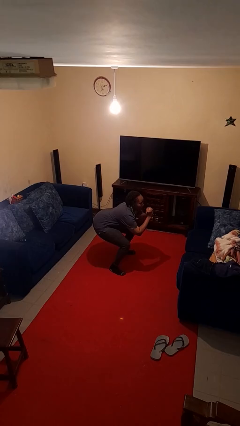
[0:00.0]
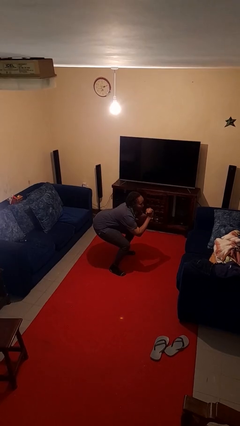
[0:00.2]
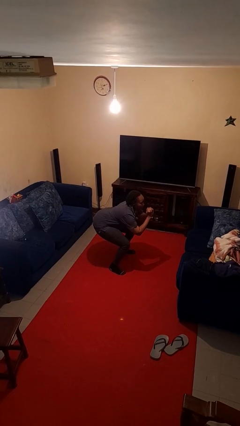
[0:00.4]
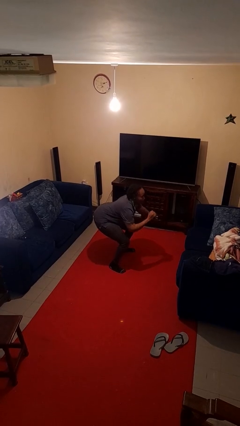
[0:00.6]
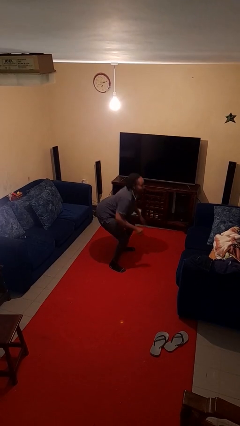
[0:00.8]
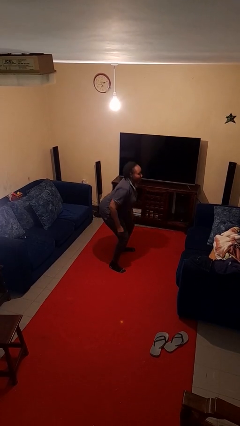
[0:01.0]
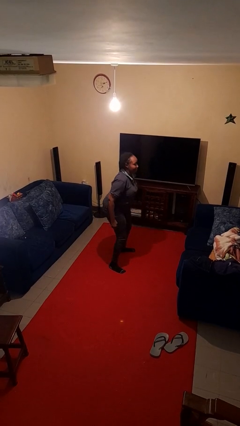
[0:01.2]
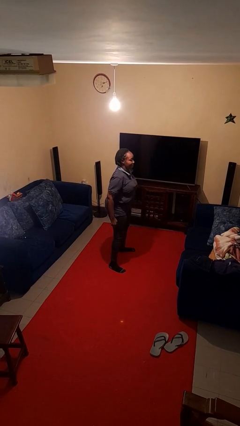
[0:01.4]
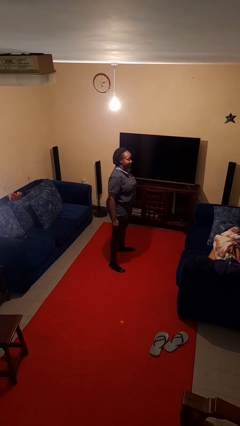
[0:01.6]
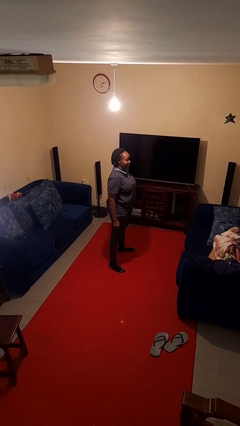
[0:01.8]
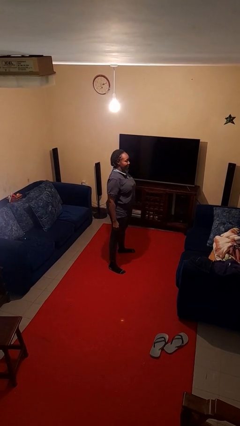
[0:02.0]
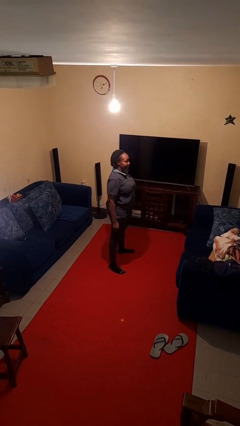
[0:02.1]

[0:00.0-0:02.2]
person stands up

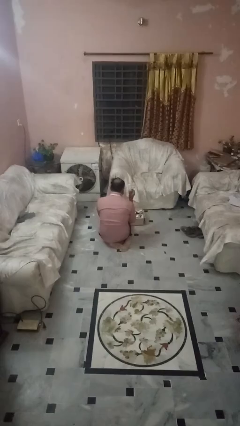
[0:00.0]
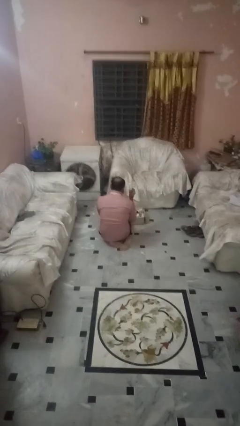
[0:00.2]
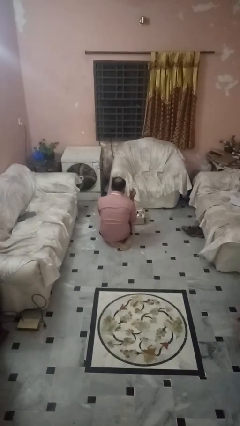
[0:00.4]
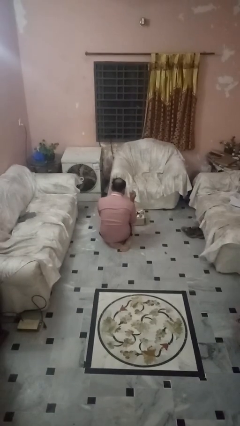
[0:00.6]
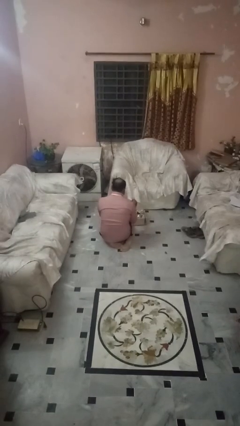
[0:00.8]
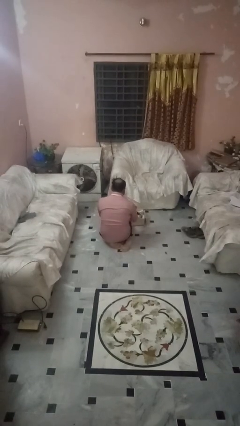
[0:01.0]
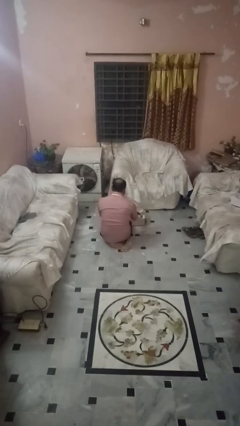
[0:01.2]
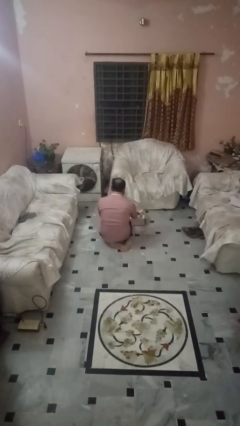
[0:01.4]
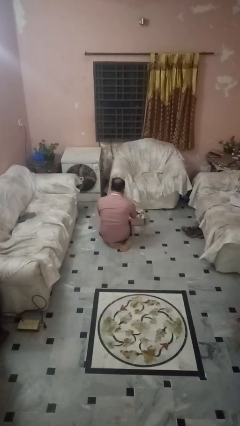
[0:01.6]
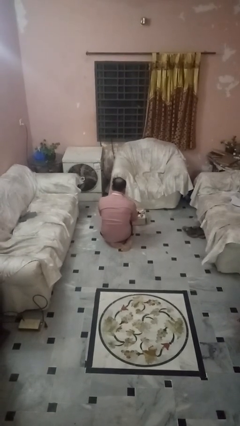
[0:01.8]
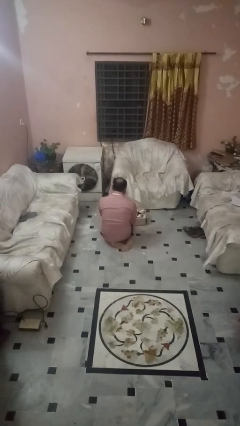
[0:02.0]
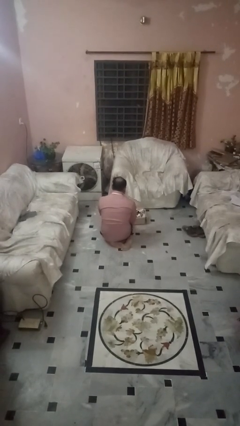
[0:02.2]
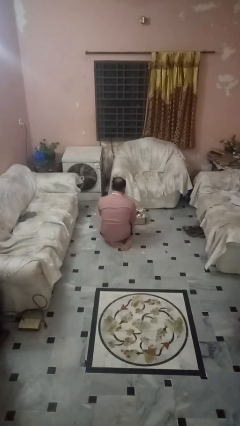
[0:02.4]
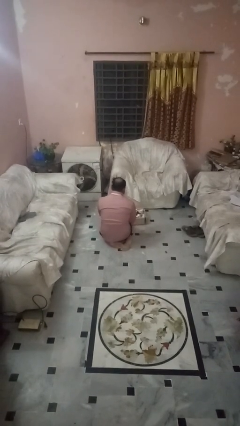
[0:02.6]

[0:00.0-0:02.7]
person puts object into box

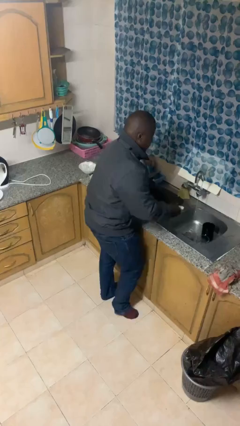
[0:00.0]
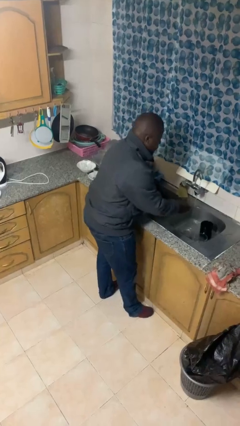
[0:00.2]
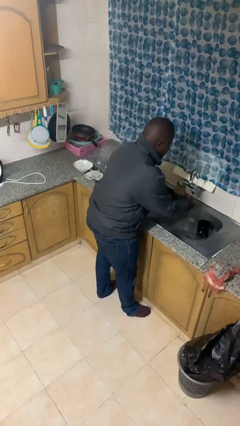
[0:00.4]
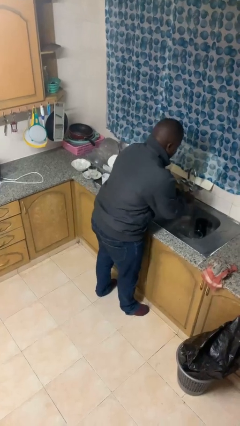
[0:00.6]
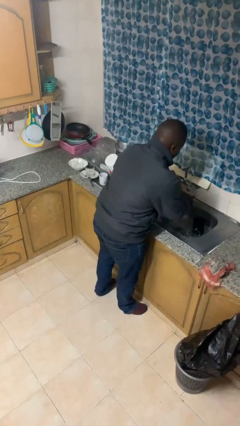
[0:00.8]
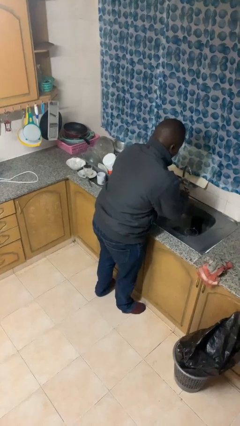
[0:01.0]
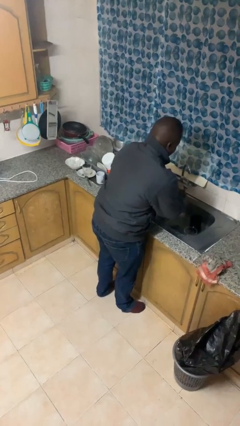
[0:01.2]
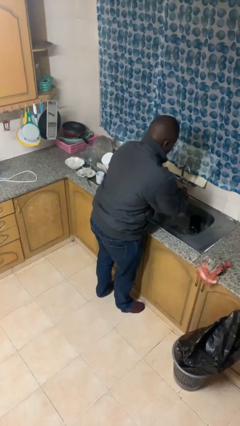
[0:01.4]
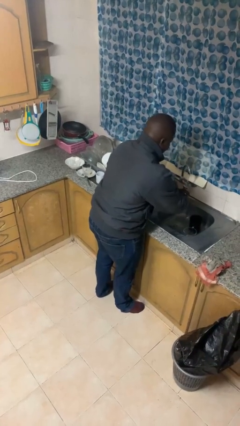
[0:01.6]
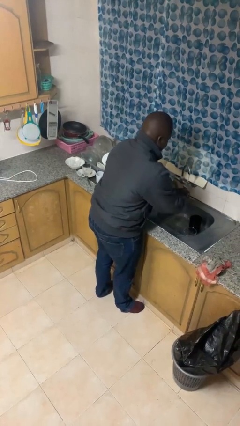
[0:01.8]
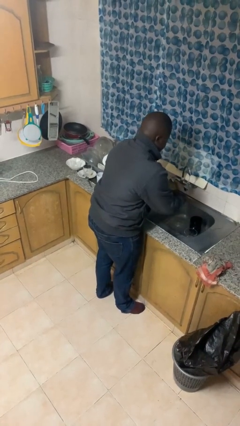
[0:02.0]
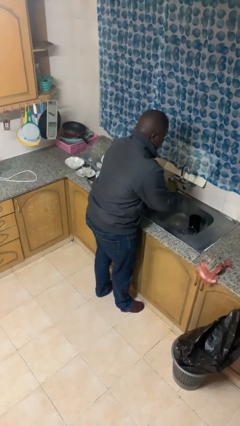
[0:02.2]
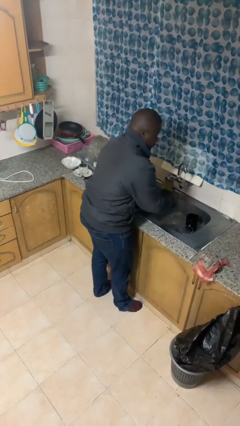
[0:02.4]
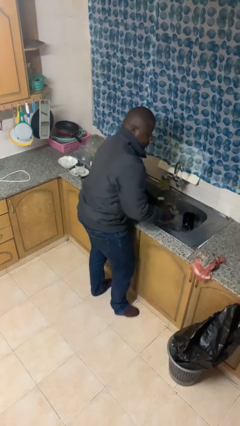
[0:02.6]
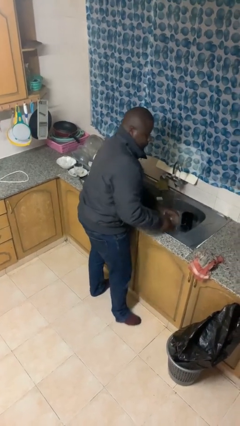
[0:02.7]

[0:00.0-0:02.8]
person washes hands

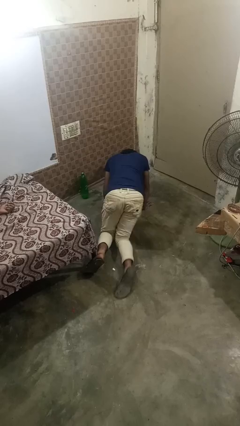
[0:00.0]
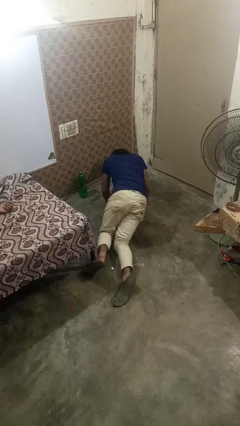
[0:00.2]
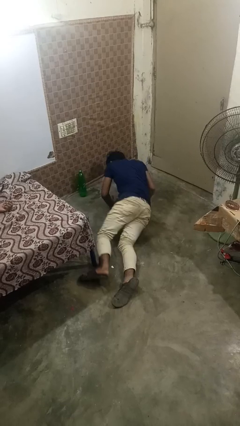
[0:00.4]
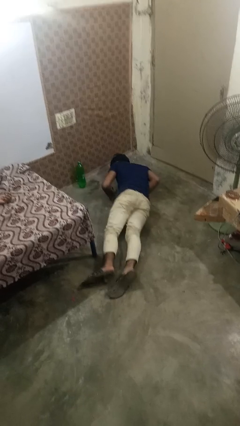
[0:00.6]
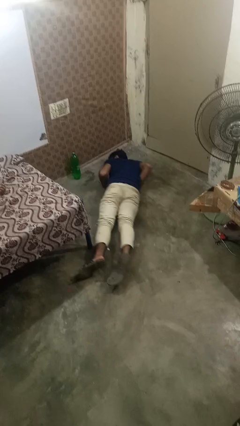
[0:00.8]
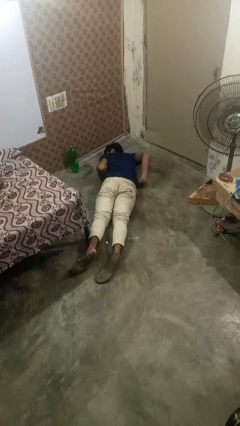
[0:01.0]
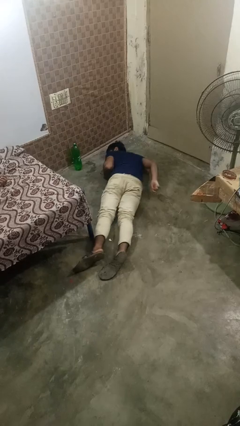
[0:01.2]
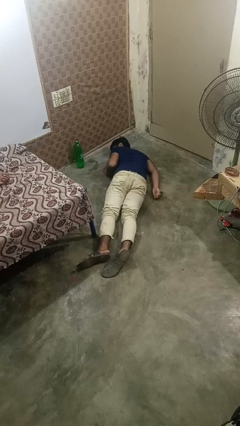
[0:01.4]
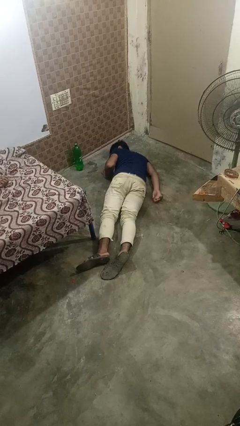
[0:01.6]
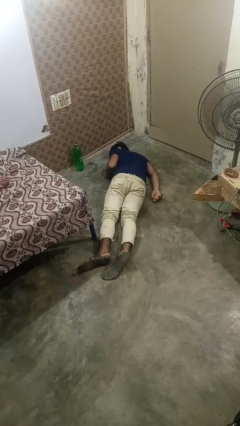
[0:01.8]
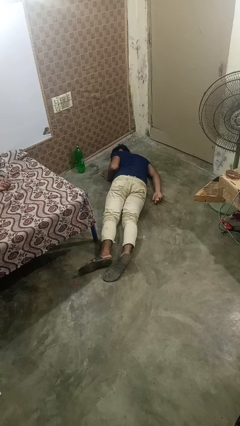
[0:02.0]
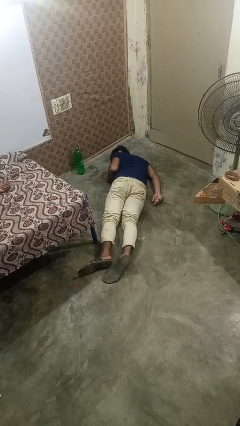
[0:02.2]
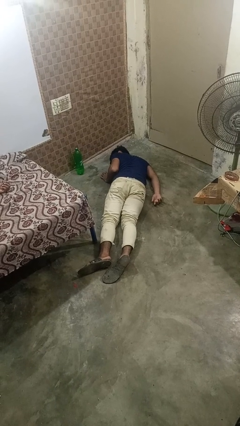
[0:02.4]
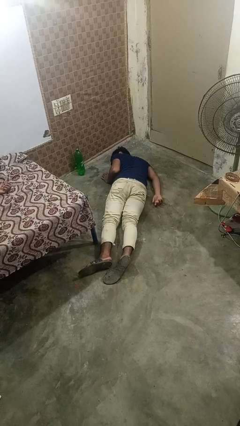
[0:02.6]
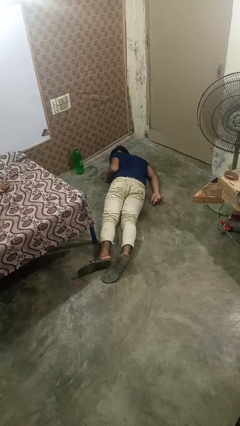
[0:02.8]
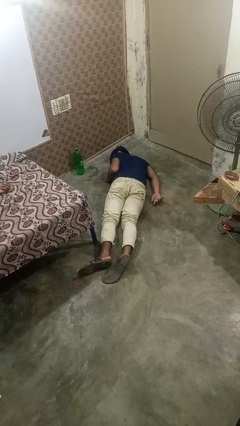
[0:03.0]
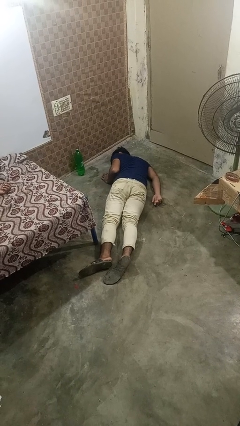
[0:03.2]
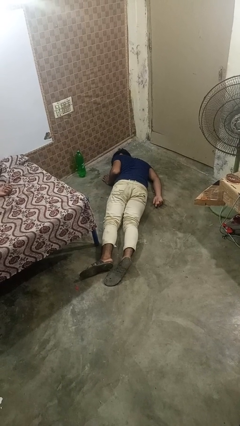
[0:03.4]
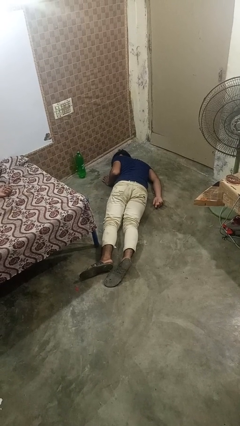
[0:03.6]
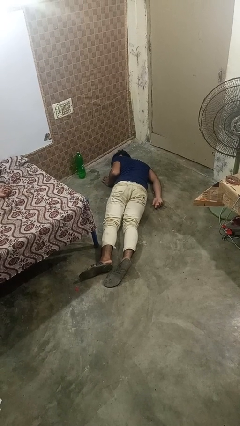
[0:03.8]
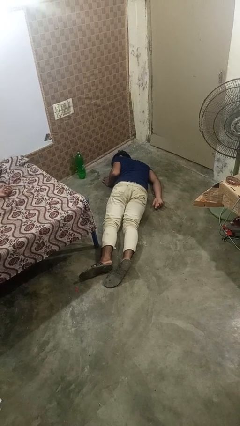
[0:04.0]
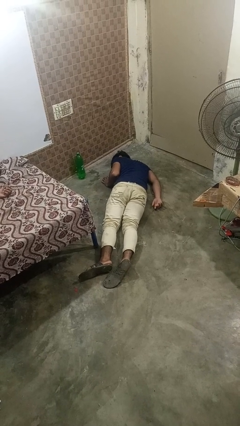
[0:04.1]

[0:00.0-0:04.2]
person lies down on floor

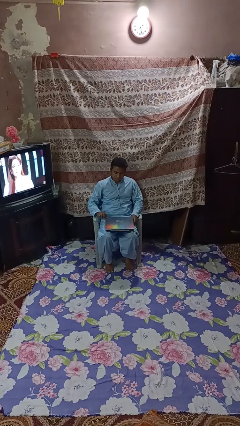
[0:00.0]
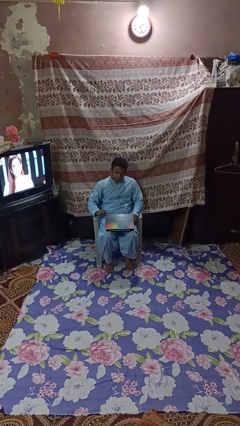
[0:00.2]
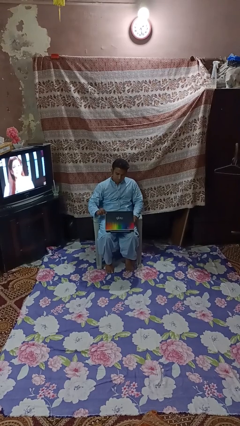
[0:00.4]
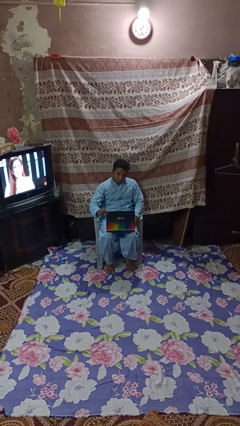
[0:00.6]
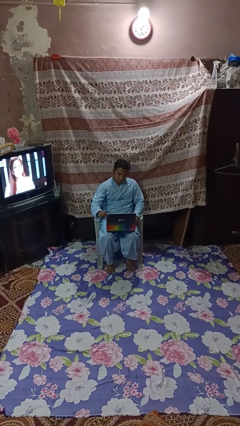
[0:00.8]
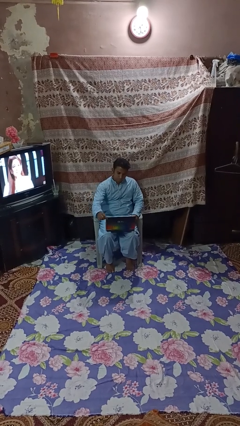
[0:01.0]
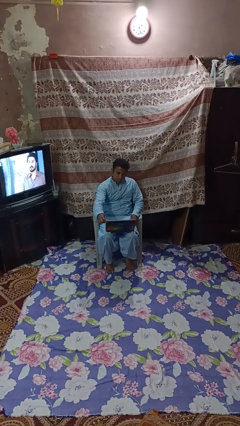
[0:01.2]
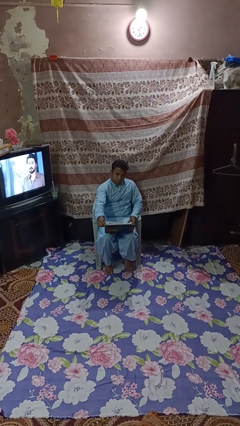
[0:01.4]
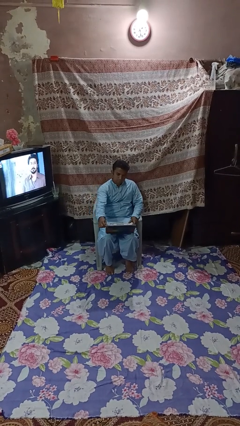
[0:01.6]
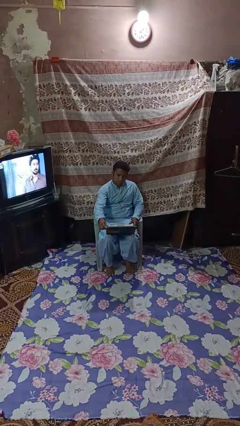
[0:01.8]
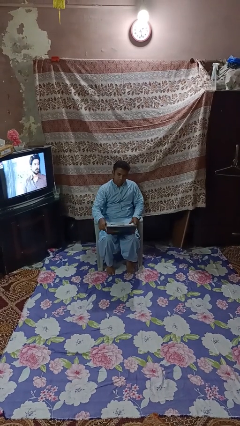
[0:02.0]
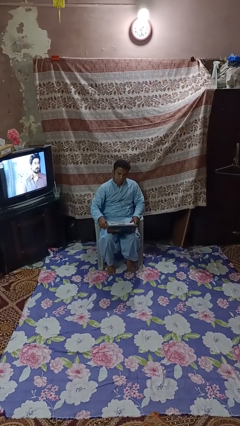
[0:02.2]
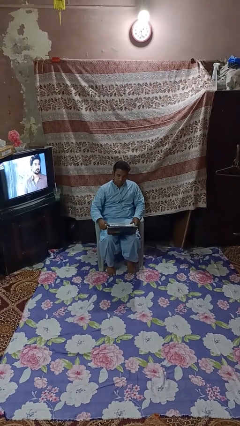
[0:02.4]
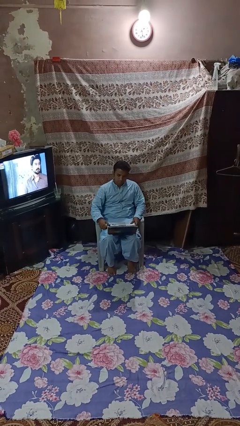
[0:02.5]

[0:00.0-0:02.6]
person opens laptop

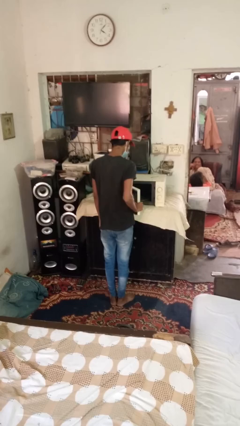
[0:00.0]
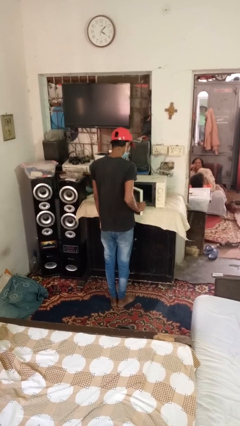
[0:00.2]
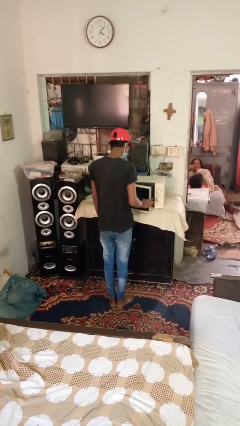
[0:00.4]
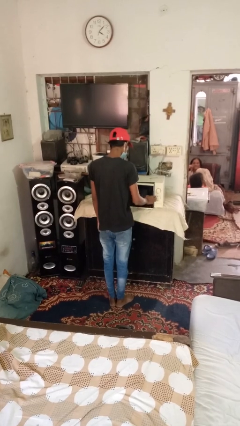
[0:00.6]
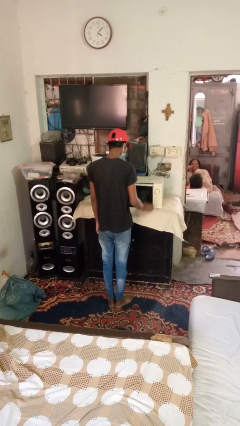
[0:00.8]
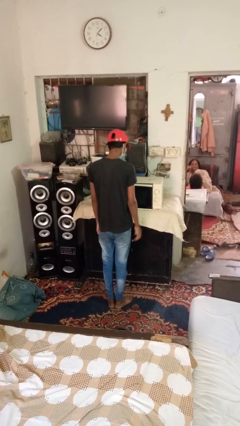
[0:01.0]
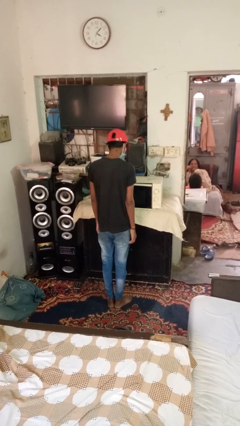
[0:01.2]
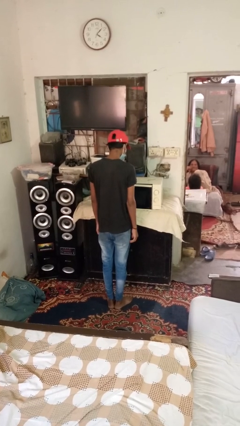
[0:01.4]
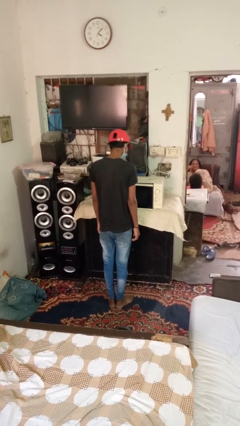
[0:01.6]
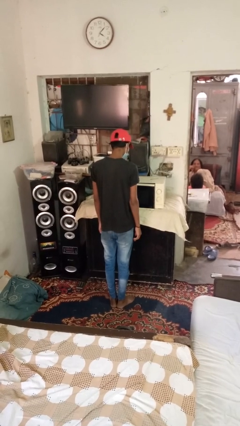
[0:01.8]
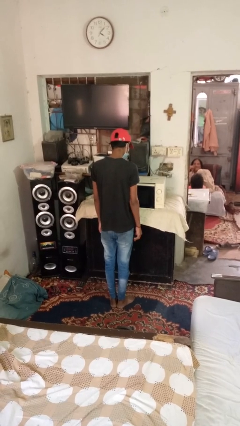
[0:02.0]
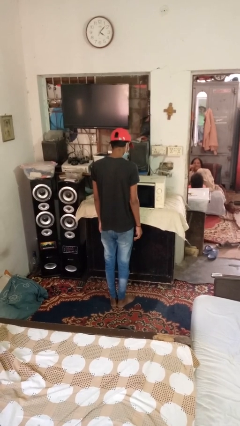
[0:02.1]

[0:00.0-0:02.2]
person closes dishwasher

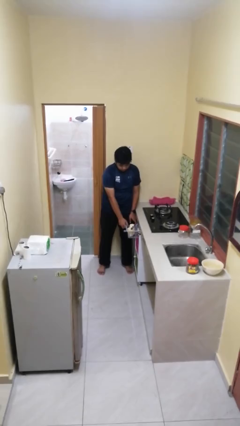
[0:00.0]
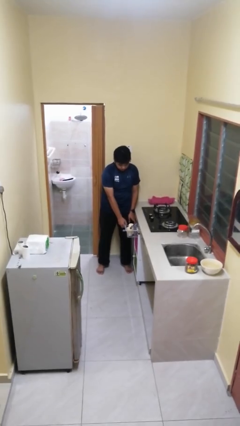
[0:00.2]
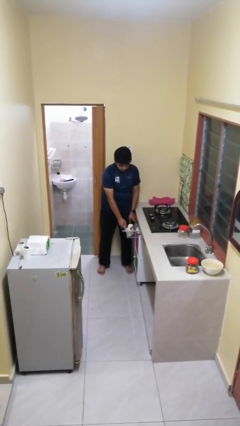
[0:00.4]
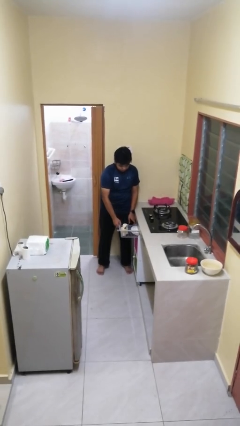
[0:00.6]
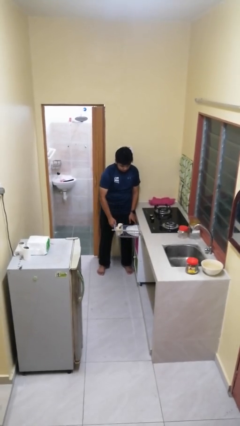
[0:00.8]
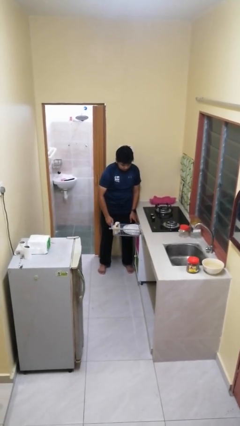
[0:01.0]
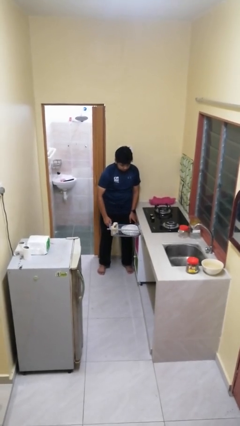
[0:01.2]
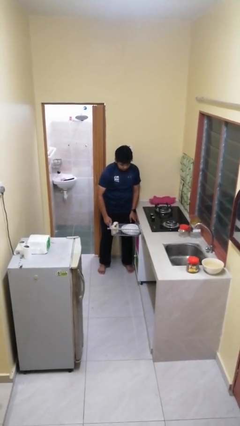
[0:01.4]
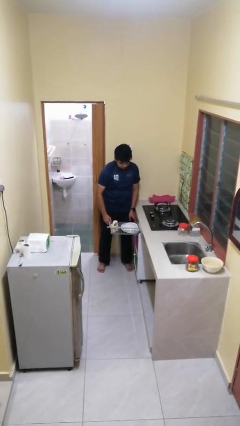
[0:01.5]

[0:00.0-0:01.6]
person opens kitchen drawer
